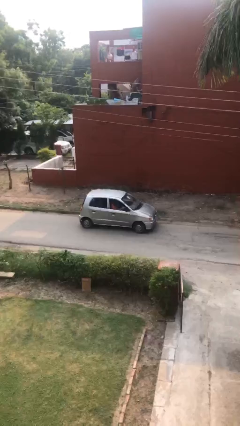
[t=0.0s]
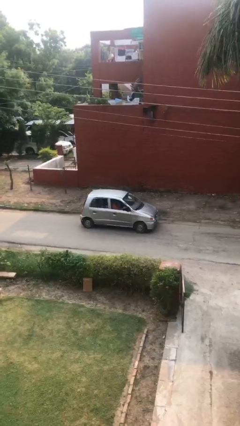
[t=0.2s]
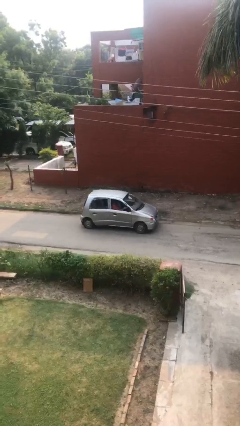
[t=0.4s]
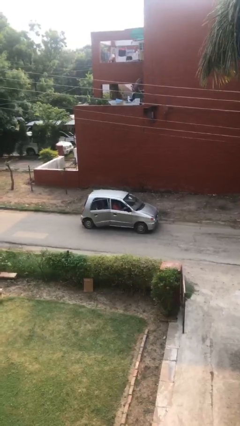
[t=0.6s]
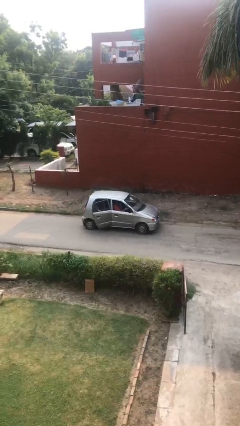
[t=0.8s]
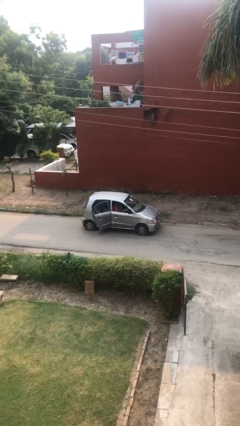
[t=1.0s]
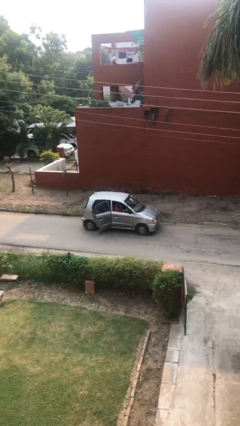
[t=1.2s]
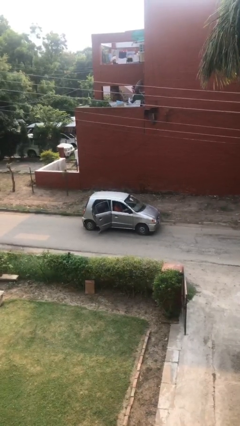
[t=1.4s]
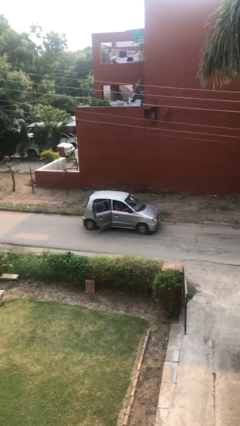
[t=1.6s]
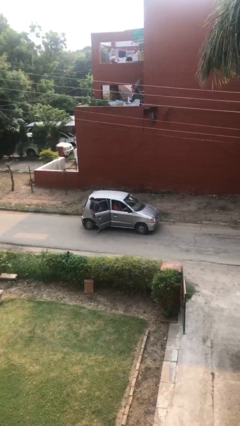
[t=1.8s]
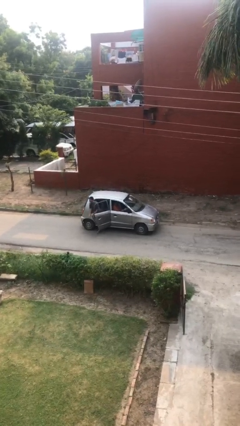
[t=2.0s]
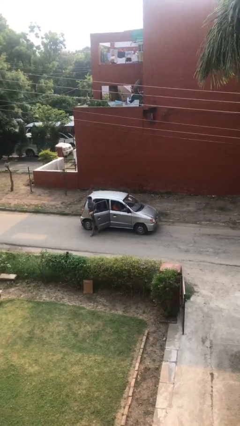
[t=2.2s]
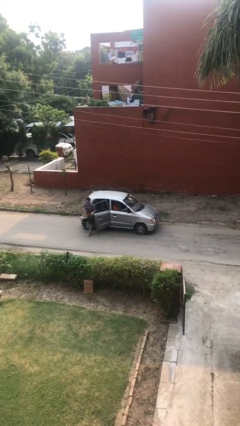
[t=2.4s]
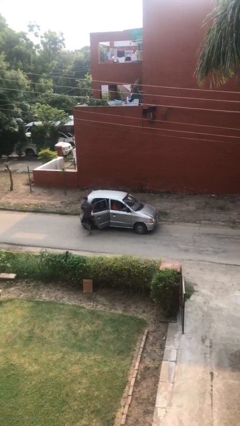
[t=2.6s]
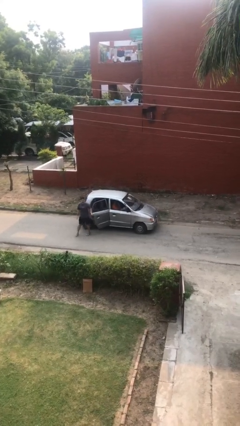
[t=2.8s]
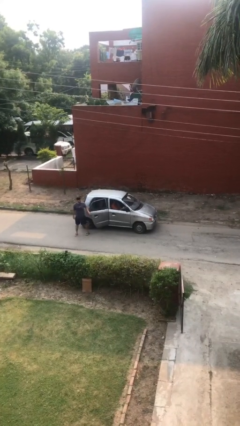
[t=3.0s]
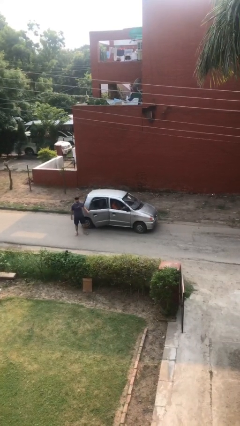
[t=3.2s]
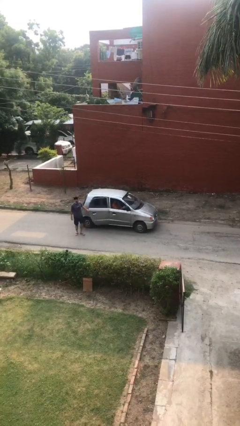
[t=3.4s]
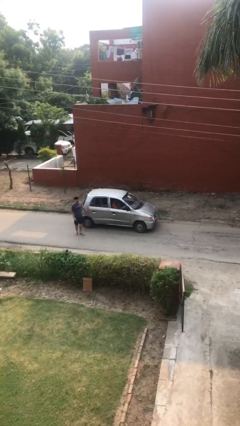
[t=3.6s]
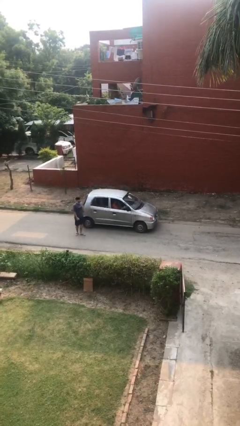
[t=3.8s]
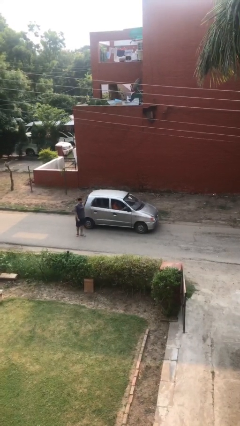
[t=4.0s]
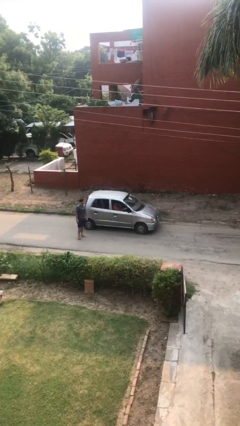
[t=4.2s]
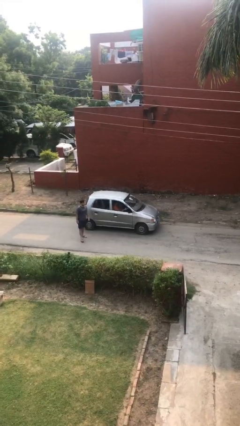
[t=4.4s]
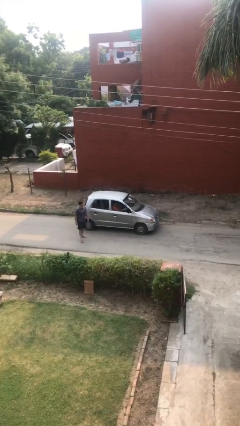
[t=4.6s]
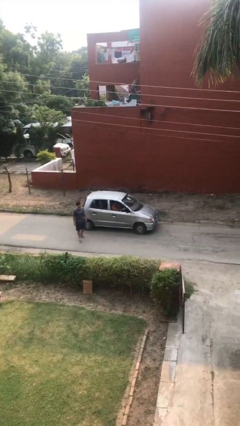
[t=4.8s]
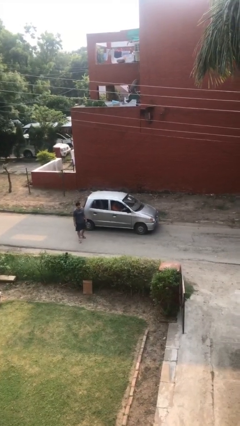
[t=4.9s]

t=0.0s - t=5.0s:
car drops off person

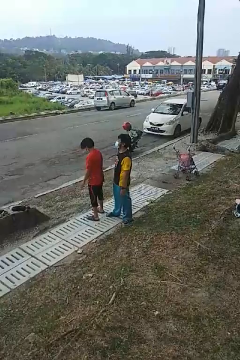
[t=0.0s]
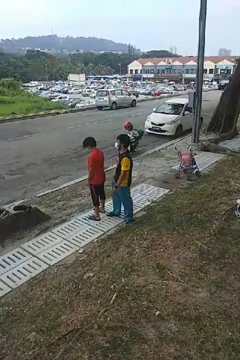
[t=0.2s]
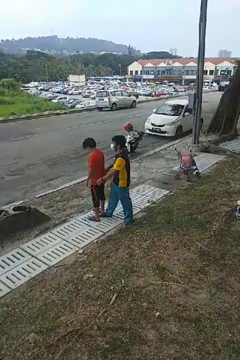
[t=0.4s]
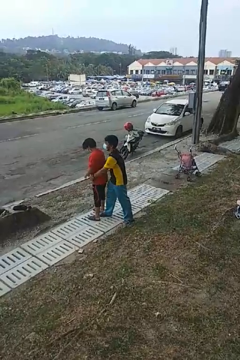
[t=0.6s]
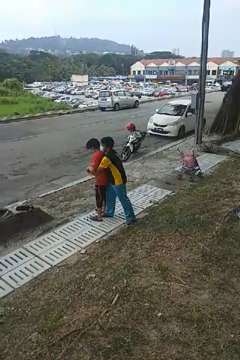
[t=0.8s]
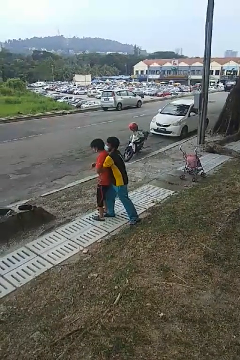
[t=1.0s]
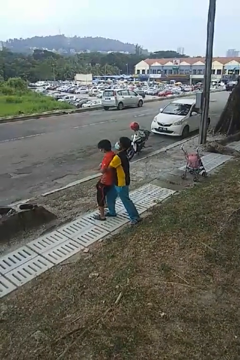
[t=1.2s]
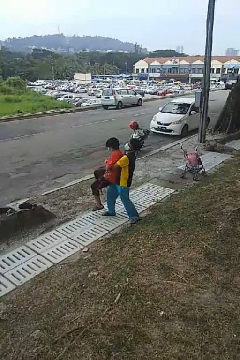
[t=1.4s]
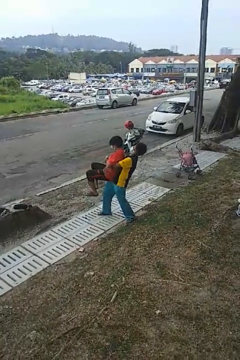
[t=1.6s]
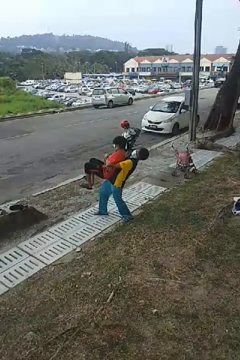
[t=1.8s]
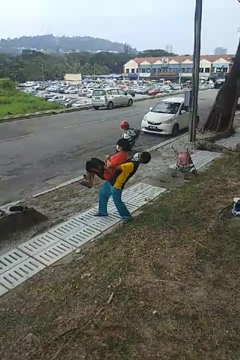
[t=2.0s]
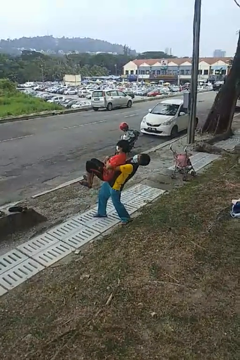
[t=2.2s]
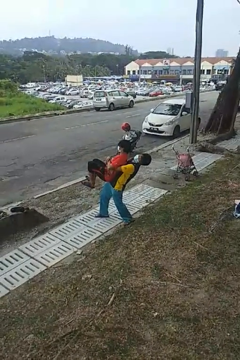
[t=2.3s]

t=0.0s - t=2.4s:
person picks up person

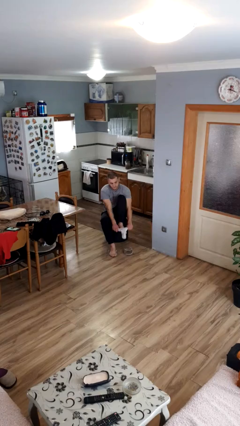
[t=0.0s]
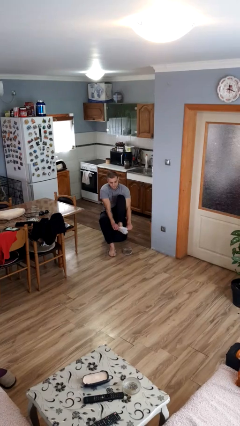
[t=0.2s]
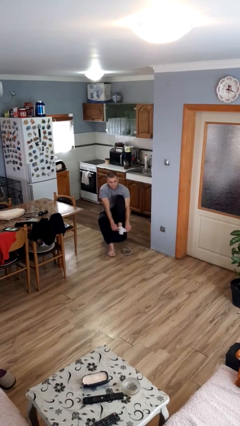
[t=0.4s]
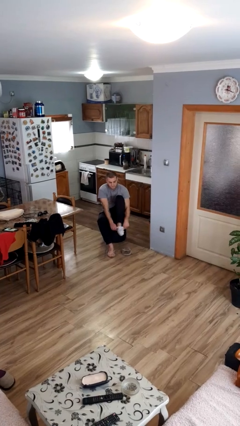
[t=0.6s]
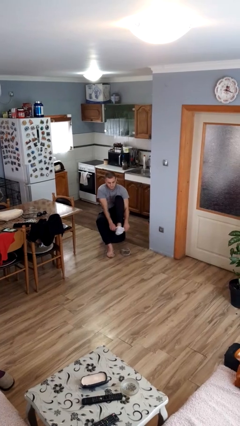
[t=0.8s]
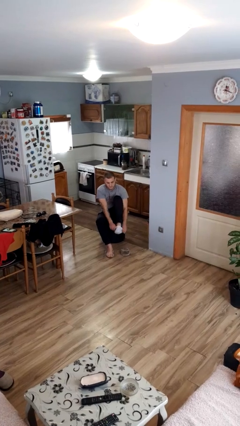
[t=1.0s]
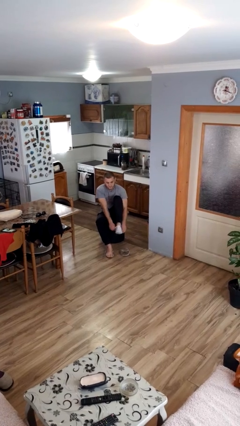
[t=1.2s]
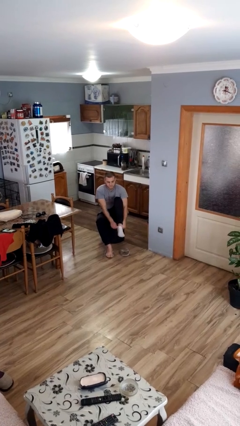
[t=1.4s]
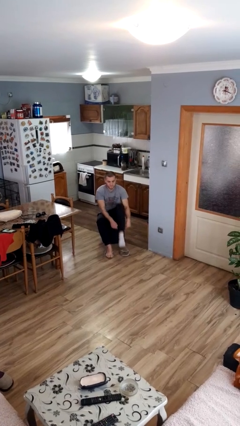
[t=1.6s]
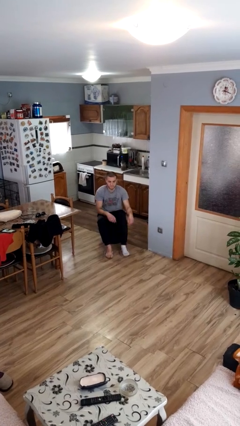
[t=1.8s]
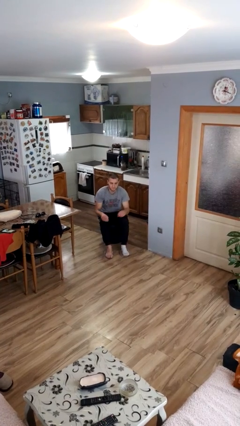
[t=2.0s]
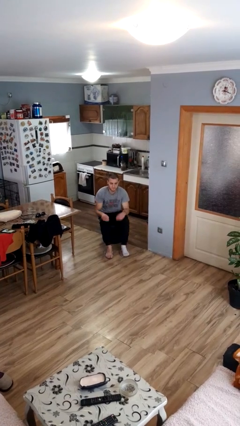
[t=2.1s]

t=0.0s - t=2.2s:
person puts on socks

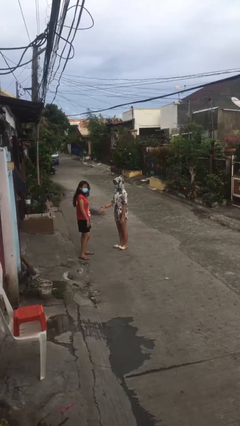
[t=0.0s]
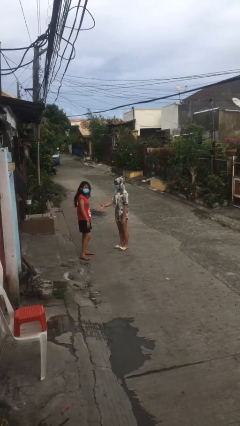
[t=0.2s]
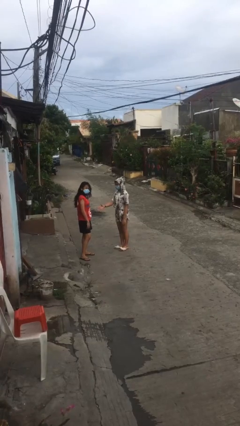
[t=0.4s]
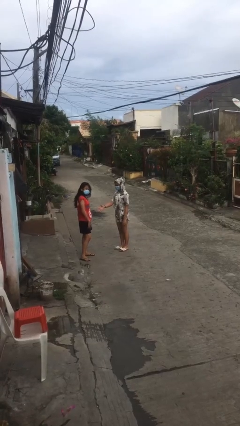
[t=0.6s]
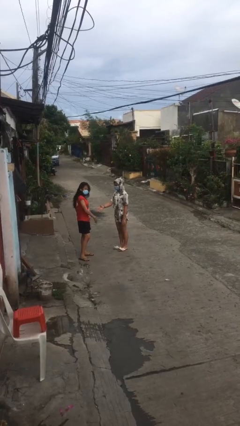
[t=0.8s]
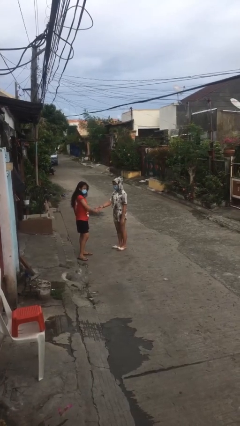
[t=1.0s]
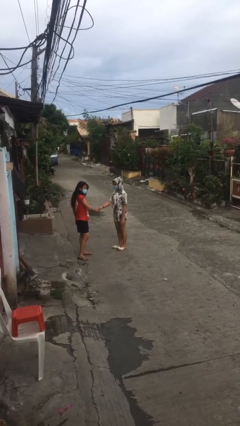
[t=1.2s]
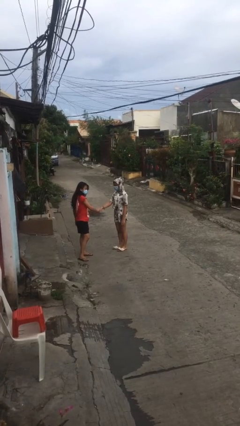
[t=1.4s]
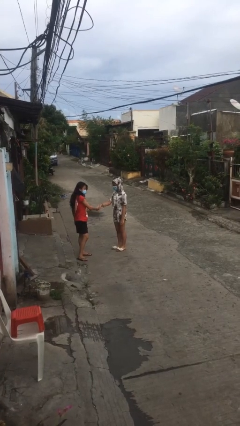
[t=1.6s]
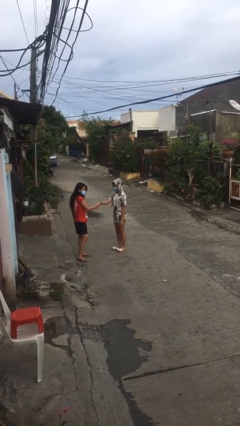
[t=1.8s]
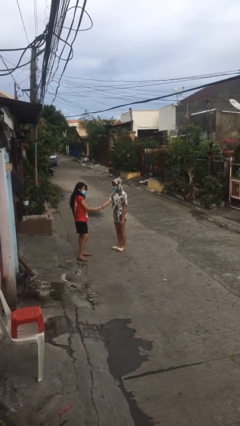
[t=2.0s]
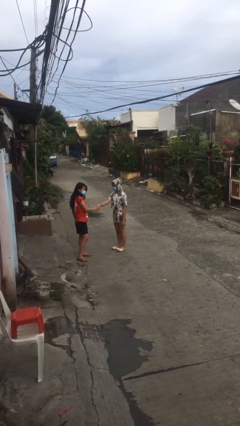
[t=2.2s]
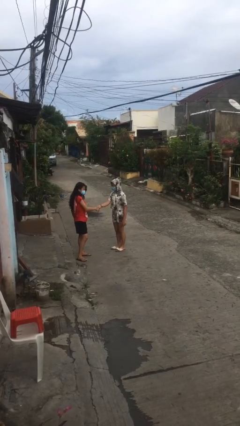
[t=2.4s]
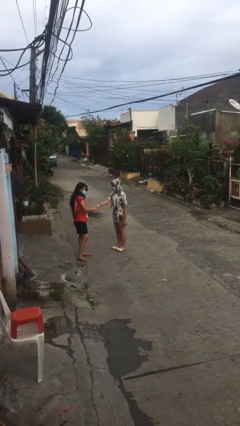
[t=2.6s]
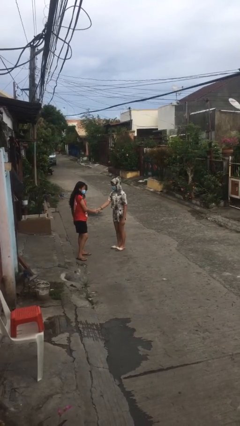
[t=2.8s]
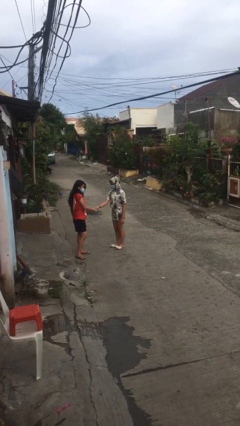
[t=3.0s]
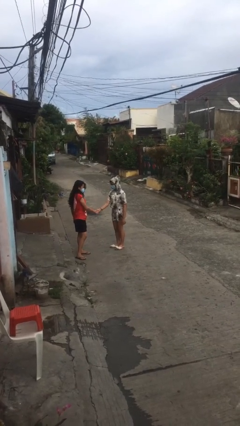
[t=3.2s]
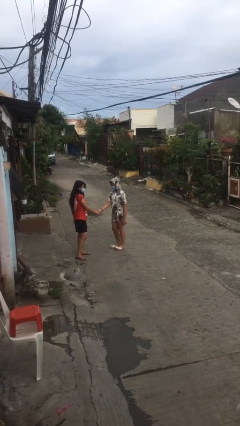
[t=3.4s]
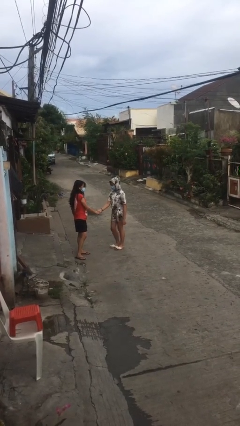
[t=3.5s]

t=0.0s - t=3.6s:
person shakes hand

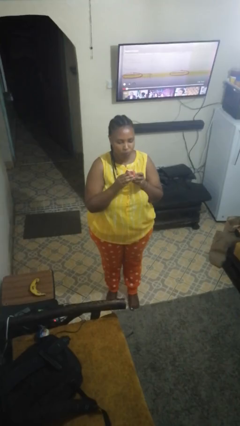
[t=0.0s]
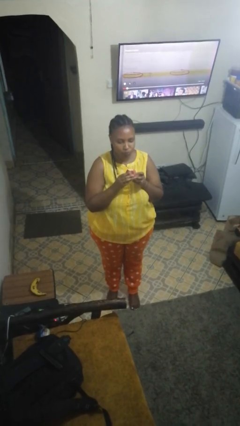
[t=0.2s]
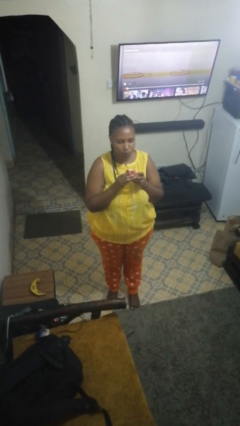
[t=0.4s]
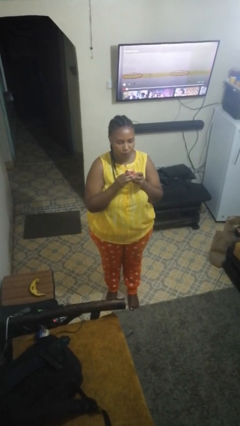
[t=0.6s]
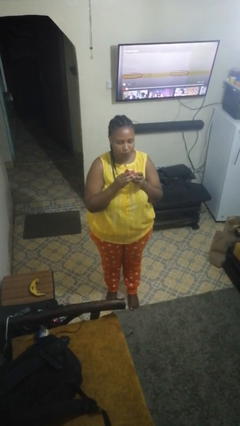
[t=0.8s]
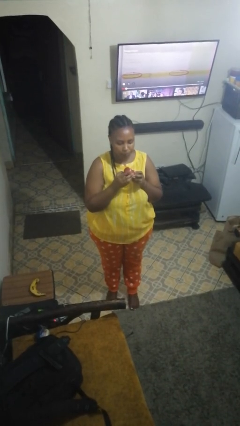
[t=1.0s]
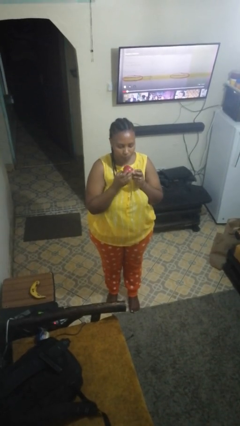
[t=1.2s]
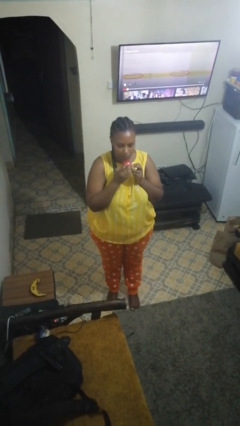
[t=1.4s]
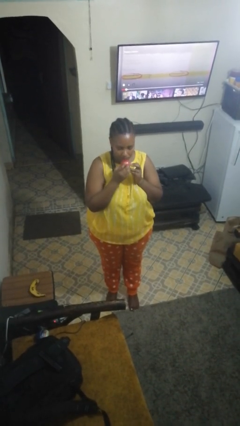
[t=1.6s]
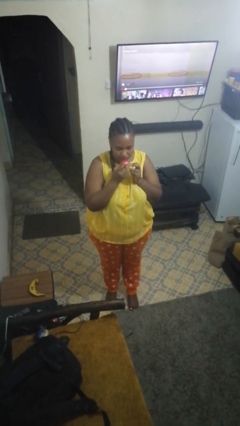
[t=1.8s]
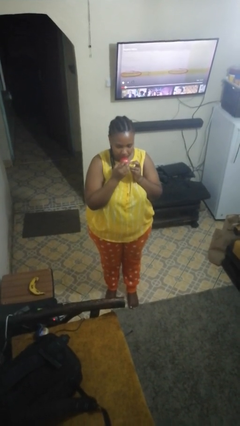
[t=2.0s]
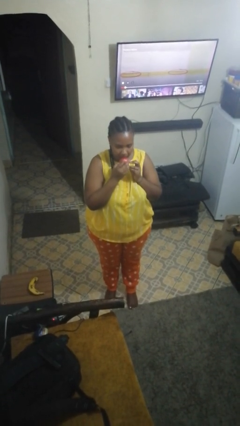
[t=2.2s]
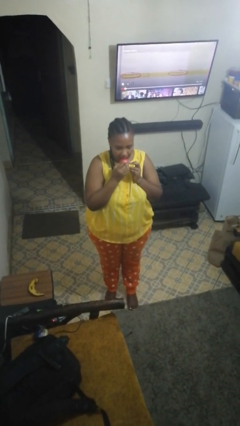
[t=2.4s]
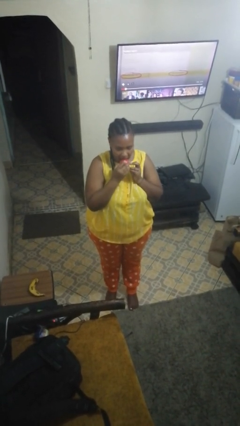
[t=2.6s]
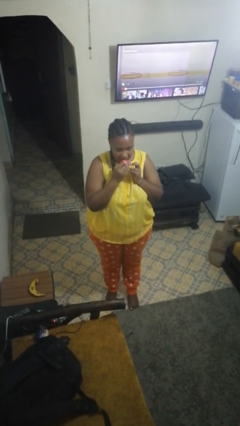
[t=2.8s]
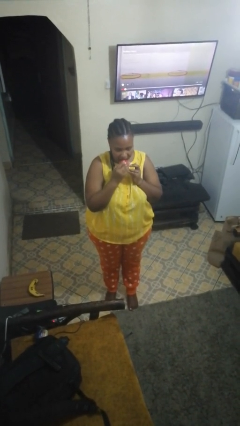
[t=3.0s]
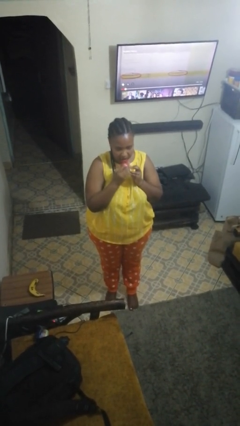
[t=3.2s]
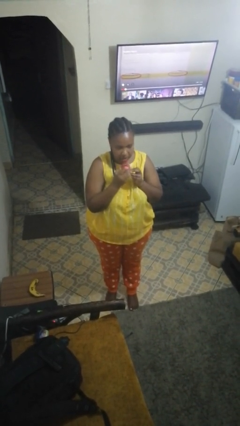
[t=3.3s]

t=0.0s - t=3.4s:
person eats apple

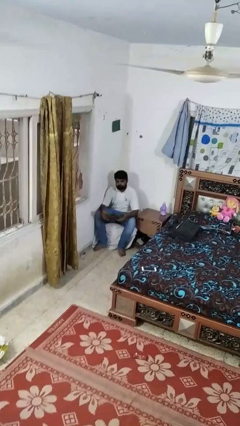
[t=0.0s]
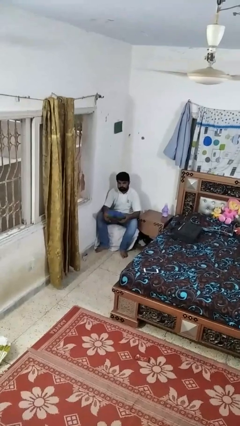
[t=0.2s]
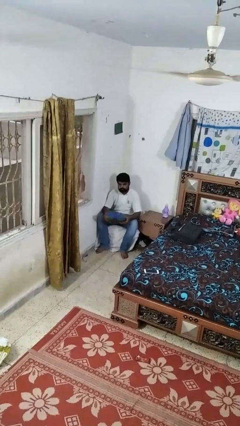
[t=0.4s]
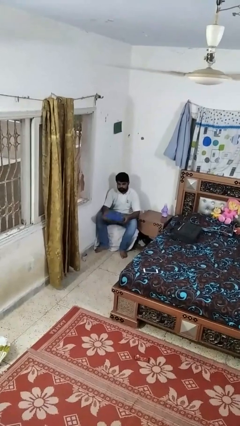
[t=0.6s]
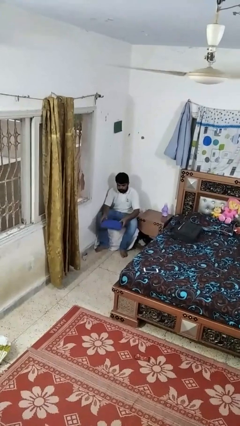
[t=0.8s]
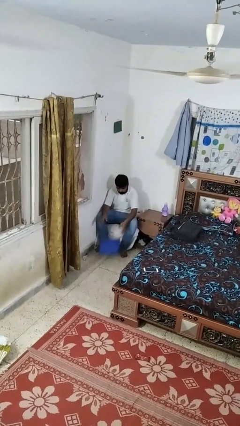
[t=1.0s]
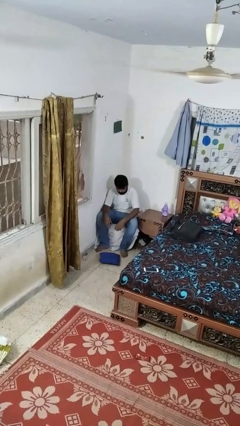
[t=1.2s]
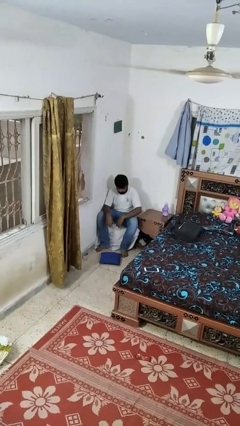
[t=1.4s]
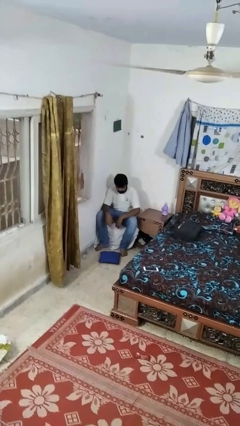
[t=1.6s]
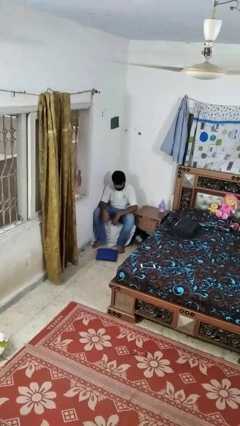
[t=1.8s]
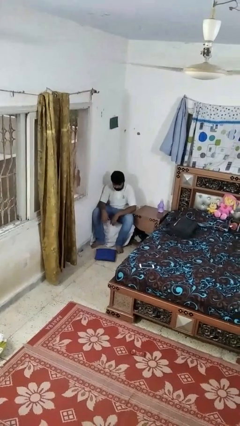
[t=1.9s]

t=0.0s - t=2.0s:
person drops object
